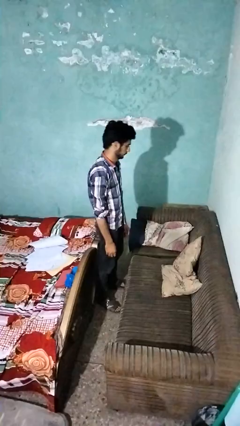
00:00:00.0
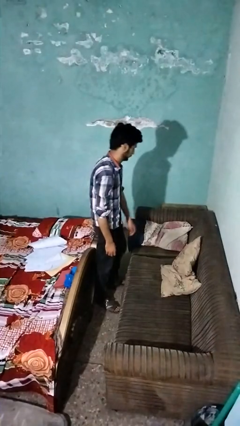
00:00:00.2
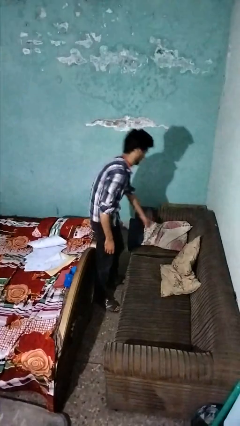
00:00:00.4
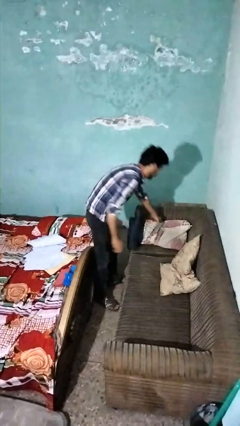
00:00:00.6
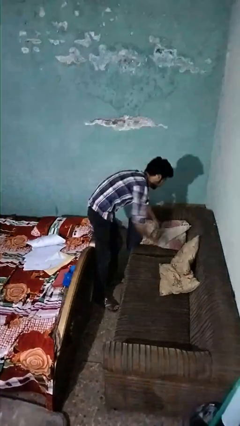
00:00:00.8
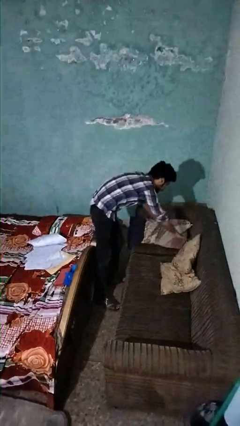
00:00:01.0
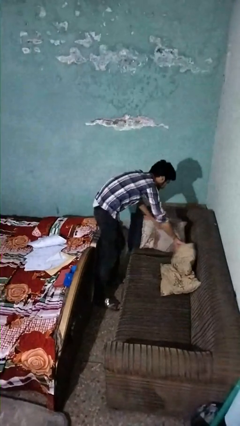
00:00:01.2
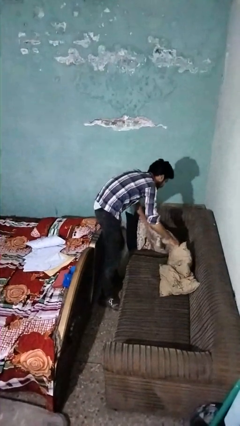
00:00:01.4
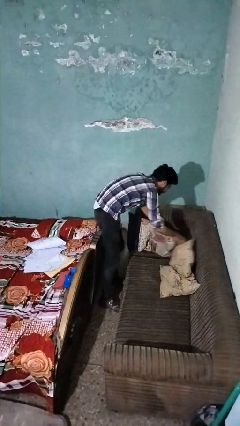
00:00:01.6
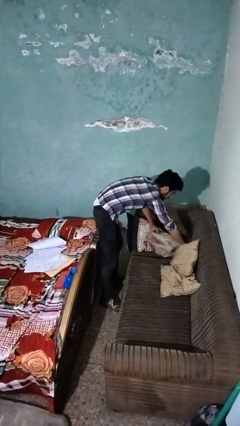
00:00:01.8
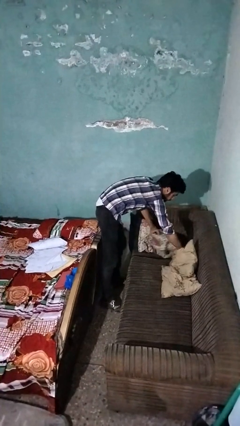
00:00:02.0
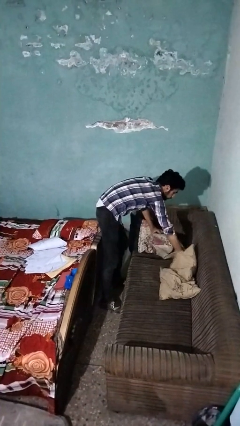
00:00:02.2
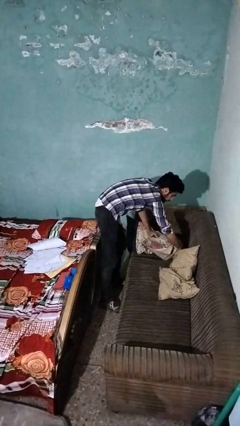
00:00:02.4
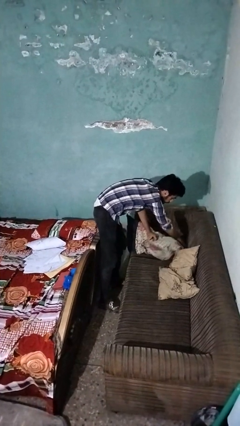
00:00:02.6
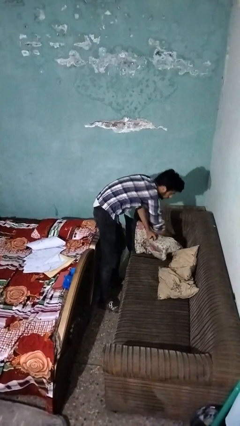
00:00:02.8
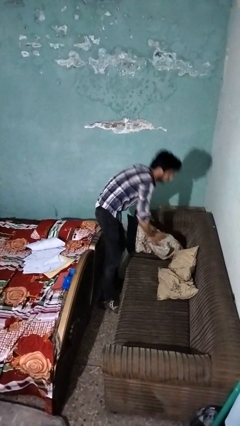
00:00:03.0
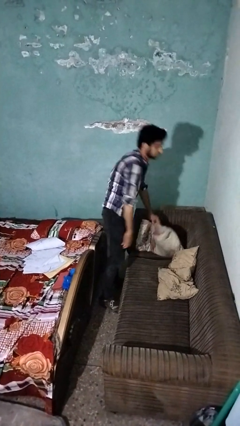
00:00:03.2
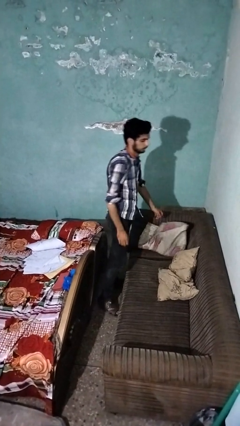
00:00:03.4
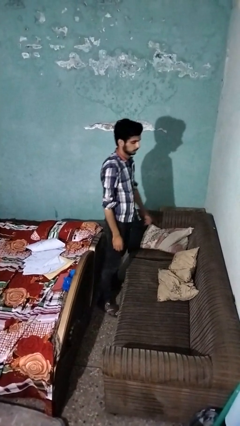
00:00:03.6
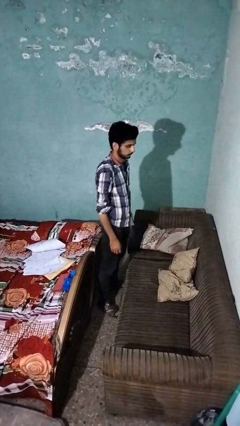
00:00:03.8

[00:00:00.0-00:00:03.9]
person searches in couch

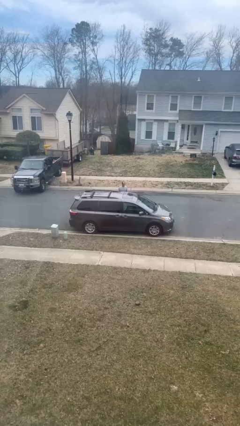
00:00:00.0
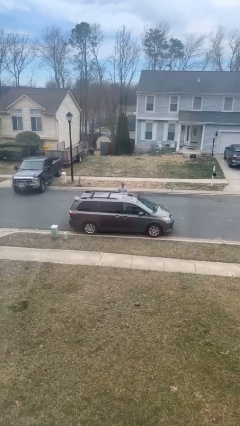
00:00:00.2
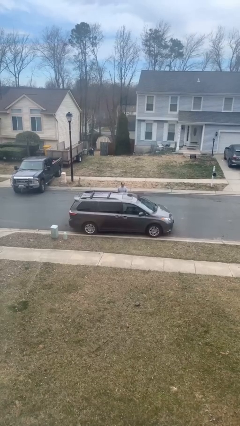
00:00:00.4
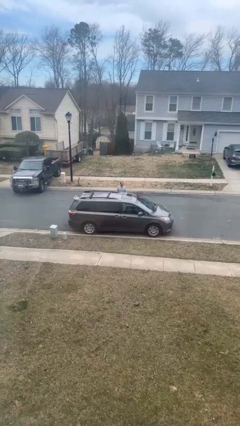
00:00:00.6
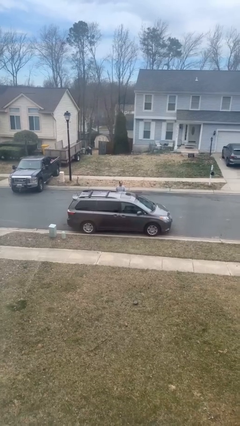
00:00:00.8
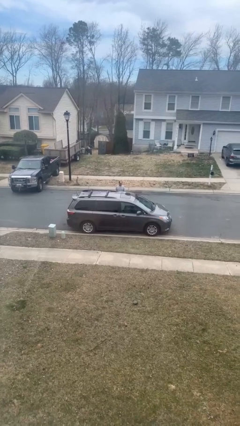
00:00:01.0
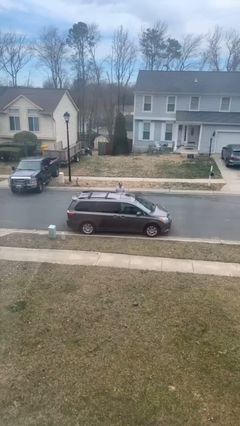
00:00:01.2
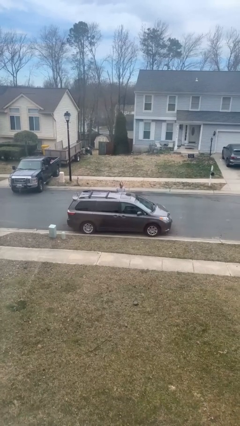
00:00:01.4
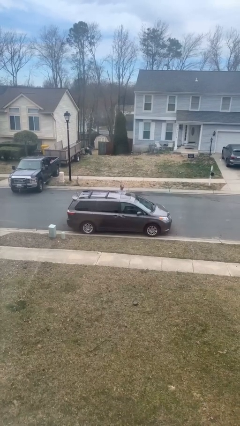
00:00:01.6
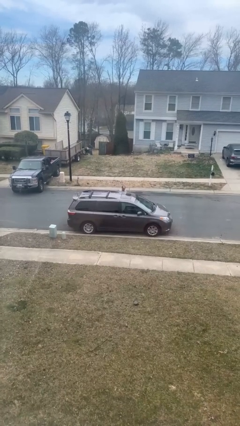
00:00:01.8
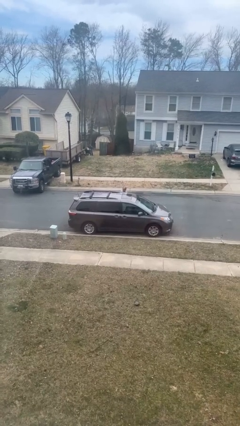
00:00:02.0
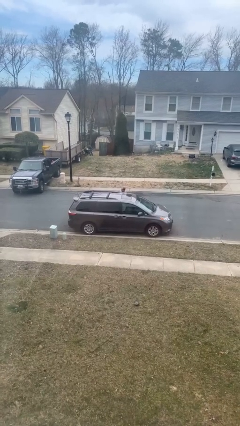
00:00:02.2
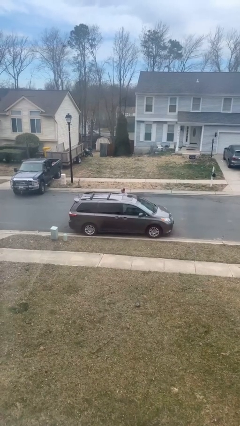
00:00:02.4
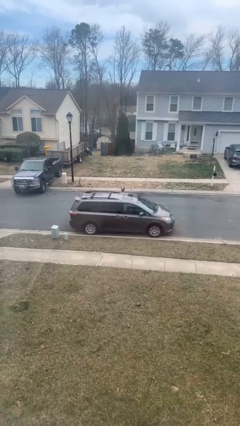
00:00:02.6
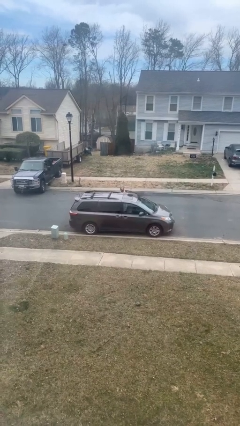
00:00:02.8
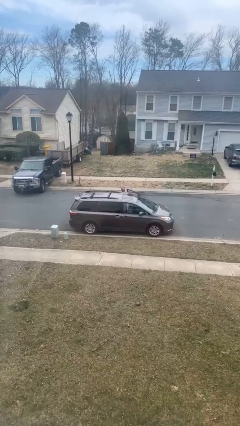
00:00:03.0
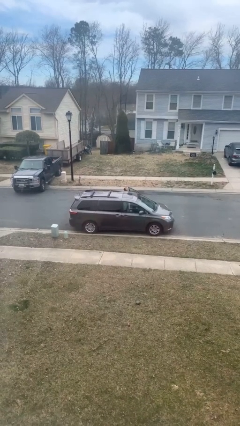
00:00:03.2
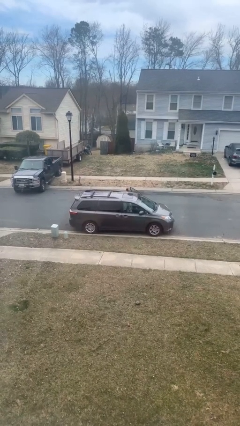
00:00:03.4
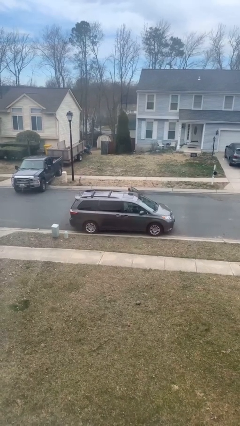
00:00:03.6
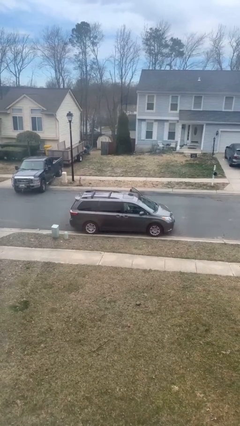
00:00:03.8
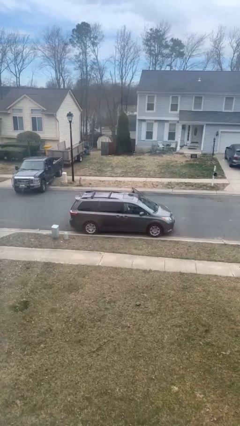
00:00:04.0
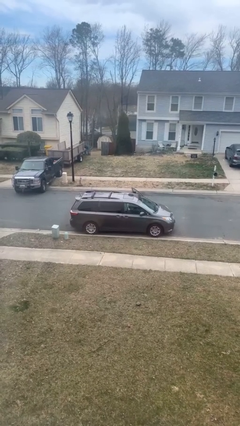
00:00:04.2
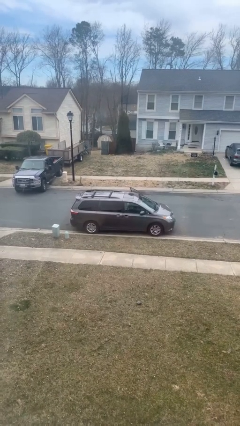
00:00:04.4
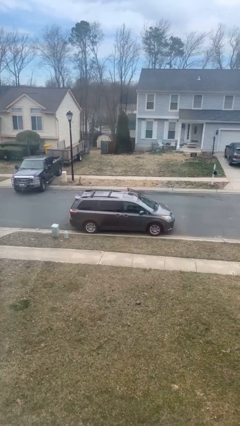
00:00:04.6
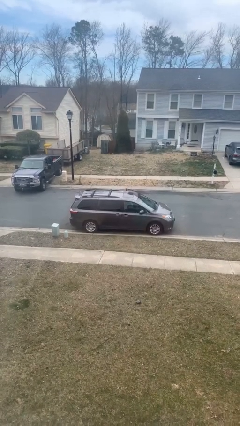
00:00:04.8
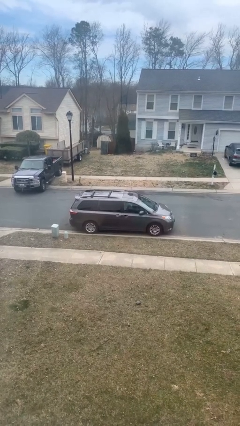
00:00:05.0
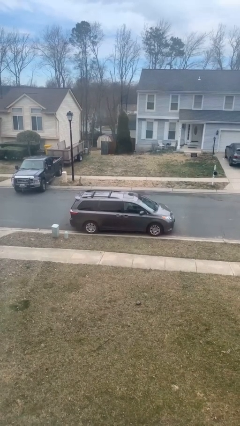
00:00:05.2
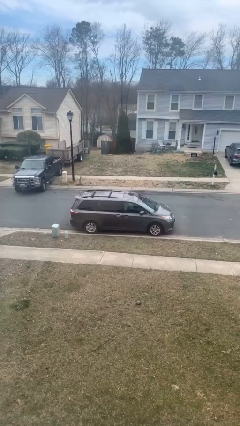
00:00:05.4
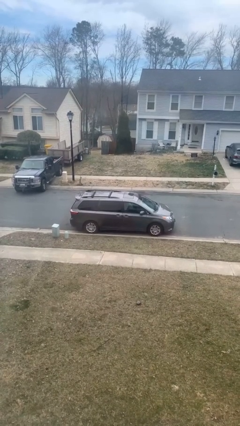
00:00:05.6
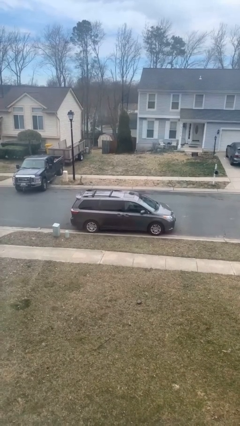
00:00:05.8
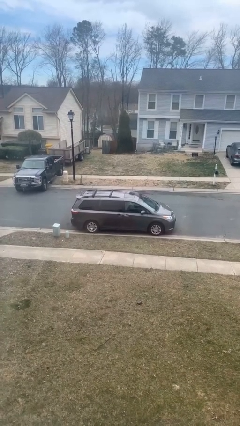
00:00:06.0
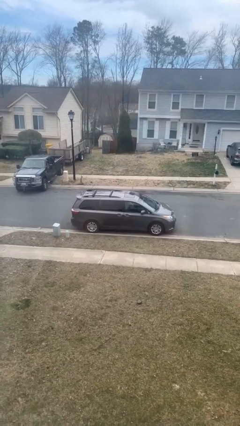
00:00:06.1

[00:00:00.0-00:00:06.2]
car picks up person

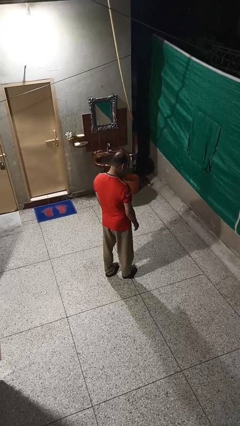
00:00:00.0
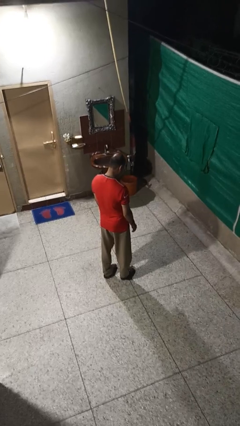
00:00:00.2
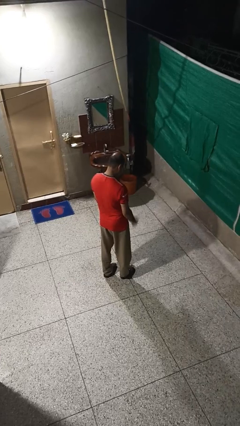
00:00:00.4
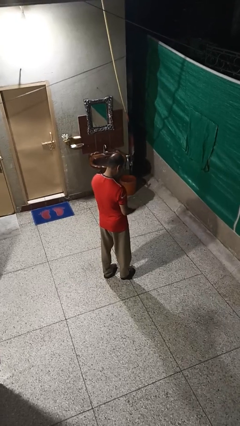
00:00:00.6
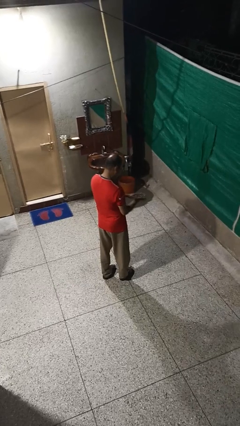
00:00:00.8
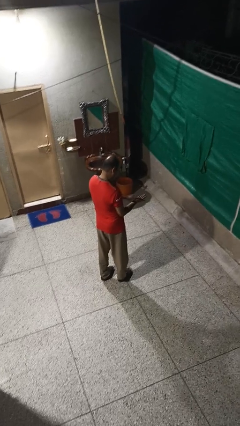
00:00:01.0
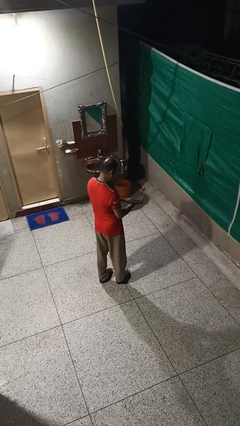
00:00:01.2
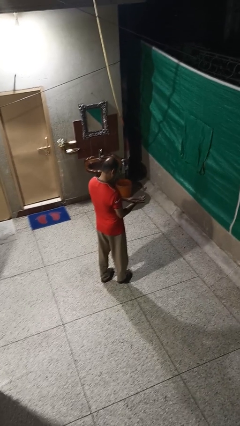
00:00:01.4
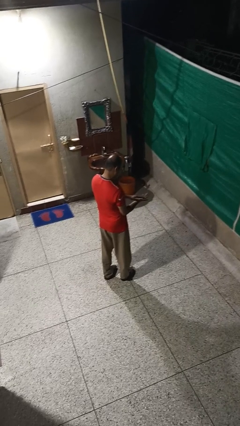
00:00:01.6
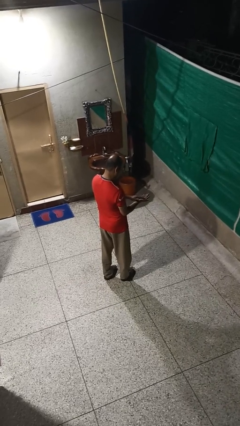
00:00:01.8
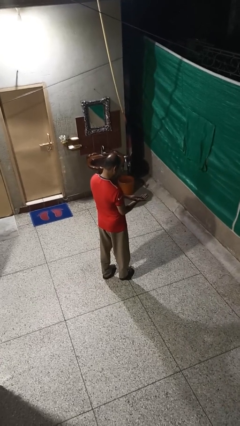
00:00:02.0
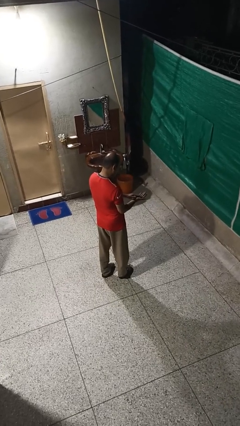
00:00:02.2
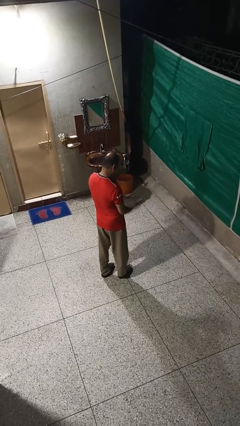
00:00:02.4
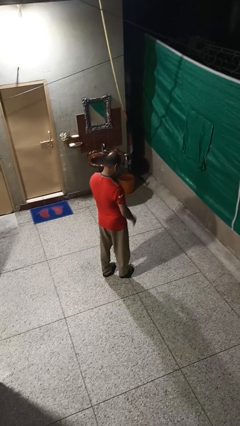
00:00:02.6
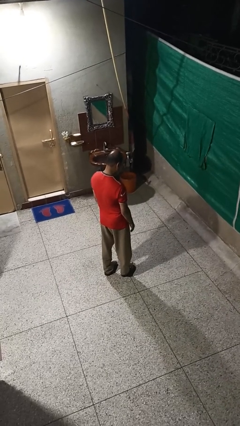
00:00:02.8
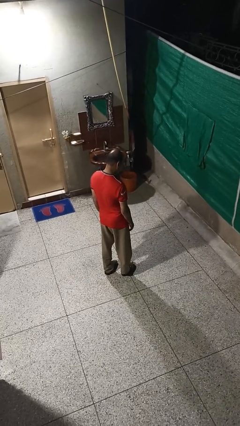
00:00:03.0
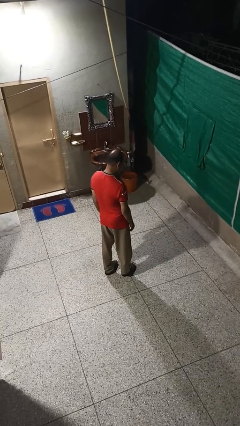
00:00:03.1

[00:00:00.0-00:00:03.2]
person claps hands

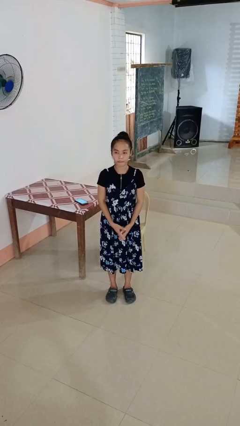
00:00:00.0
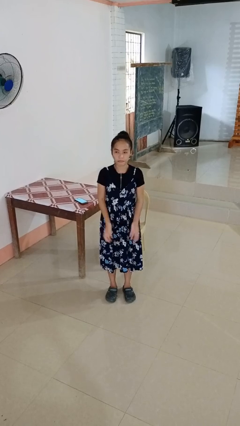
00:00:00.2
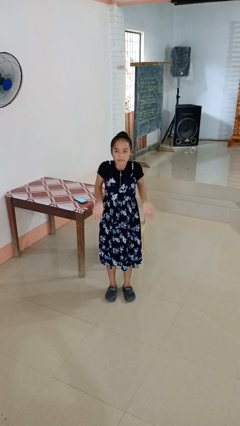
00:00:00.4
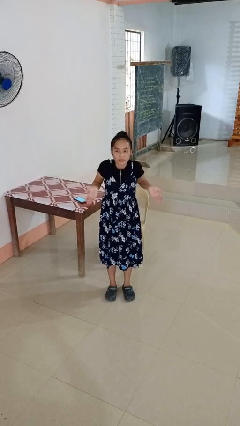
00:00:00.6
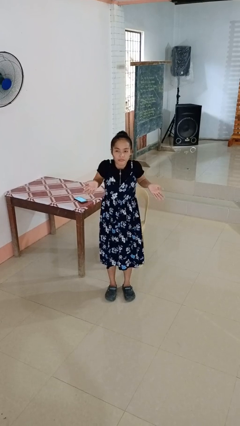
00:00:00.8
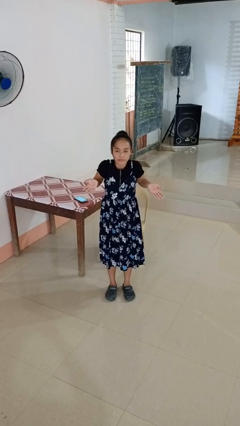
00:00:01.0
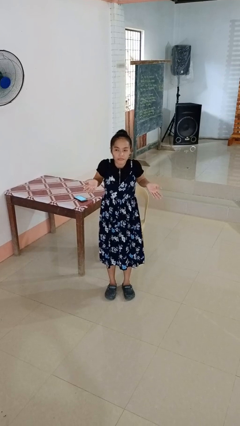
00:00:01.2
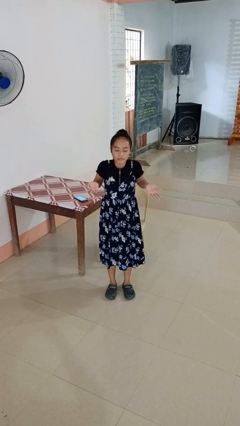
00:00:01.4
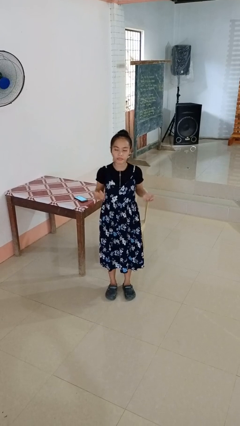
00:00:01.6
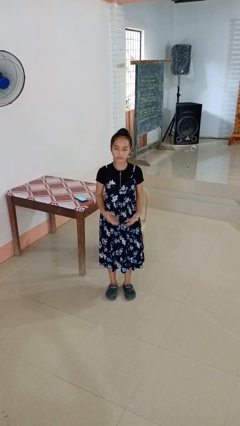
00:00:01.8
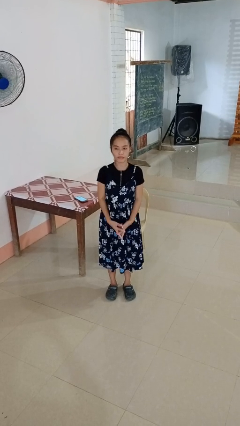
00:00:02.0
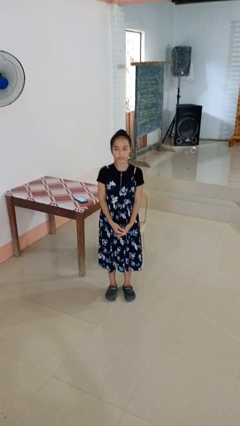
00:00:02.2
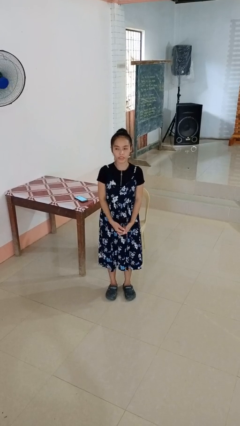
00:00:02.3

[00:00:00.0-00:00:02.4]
person shrugs

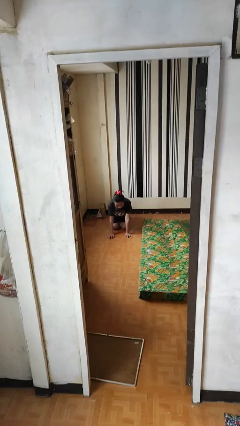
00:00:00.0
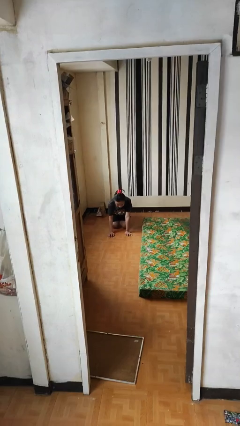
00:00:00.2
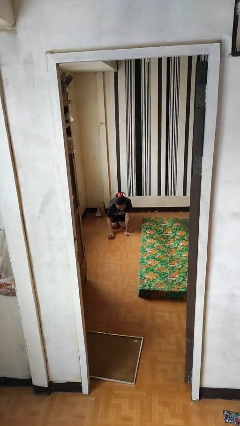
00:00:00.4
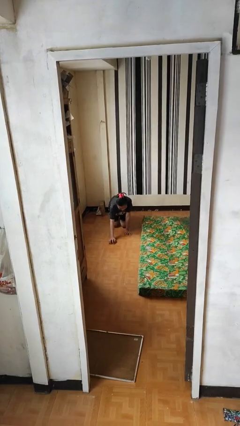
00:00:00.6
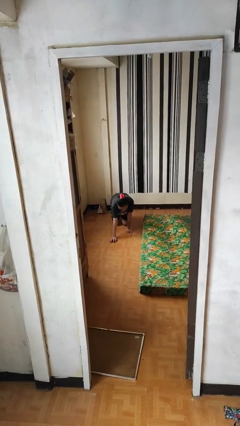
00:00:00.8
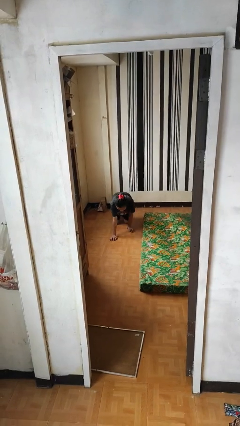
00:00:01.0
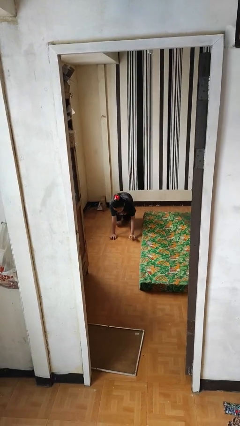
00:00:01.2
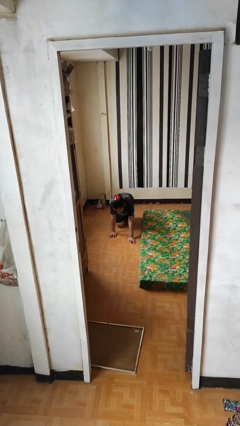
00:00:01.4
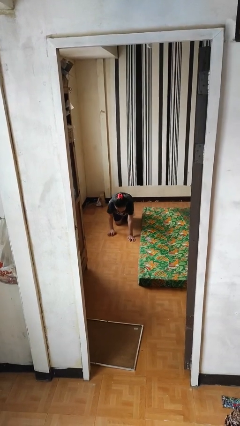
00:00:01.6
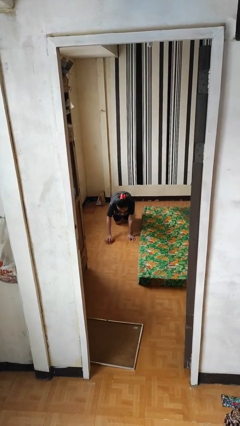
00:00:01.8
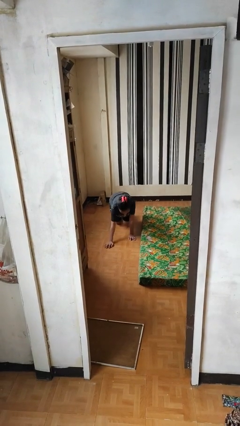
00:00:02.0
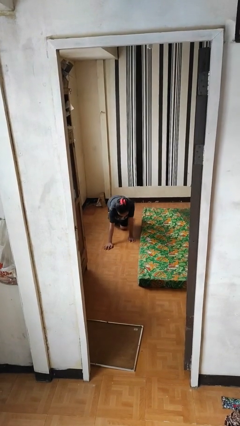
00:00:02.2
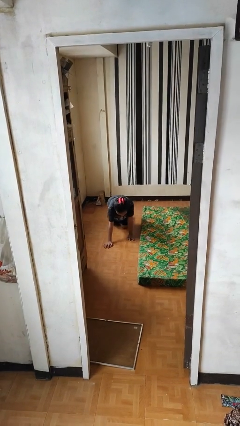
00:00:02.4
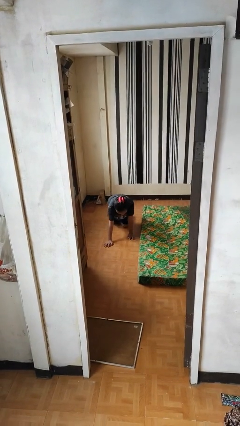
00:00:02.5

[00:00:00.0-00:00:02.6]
person crawls
